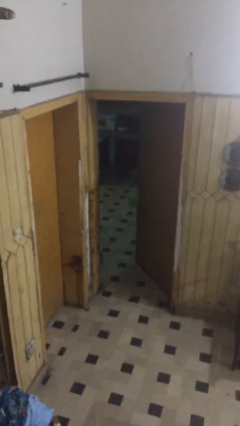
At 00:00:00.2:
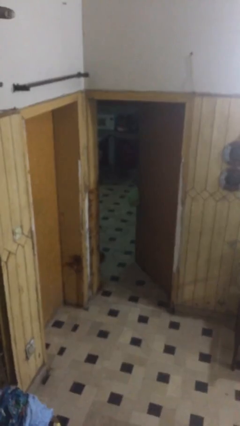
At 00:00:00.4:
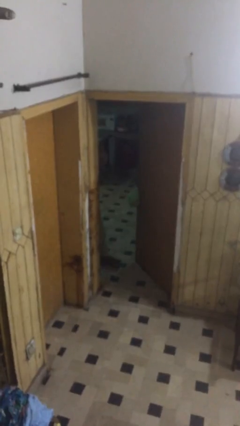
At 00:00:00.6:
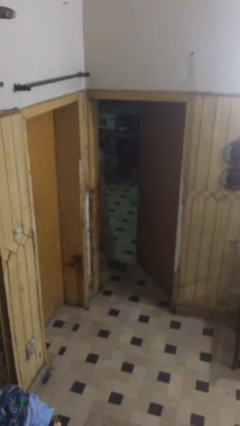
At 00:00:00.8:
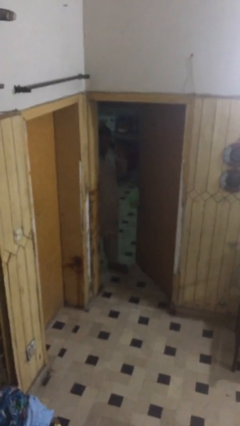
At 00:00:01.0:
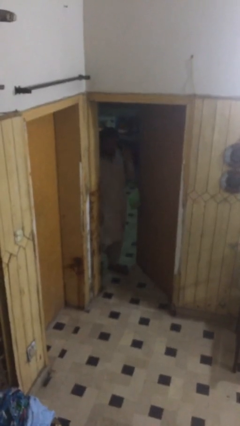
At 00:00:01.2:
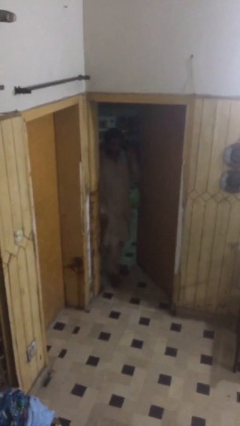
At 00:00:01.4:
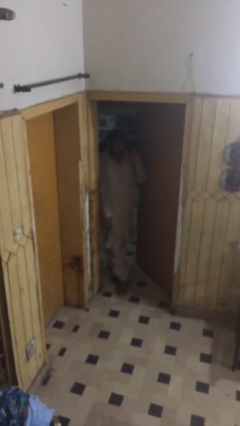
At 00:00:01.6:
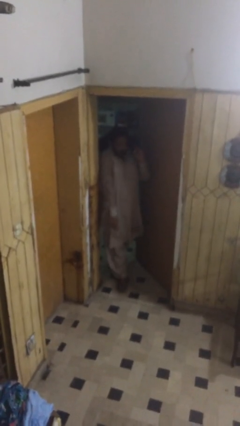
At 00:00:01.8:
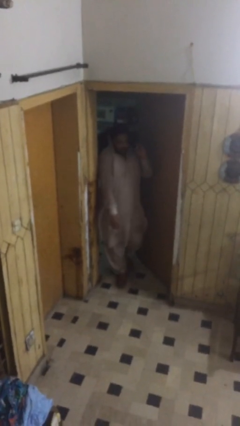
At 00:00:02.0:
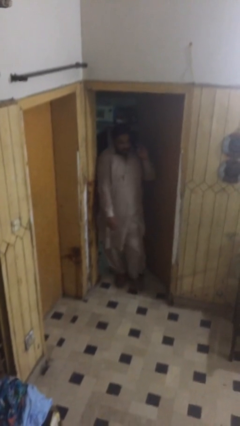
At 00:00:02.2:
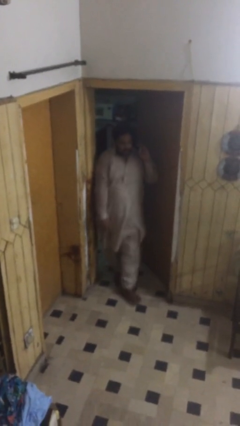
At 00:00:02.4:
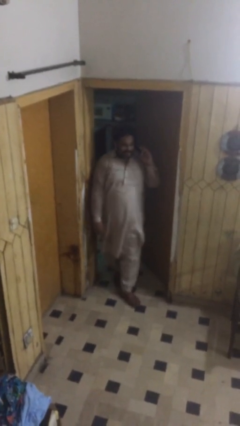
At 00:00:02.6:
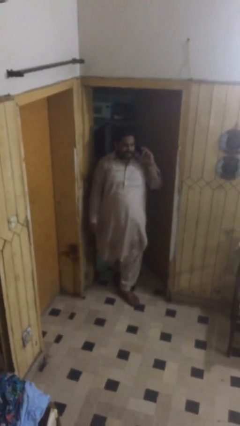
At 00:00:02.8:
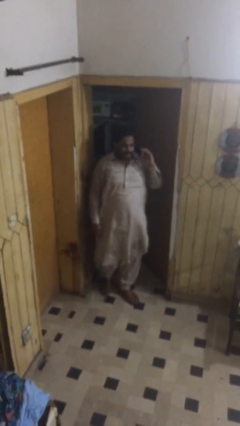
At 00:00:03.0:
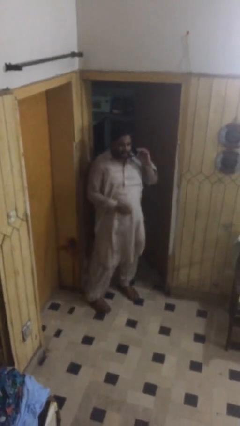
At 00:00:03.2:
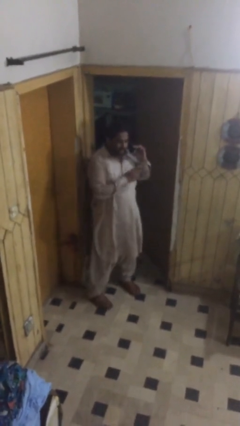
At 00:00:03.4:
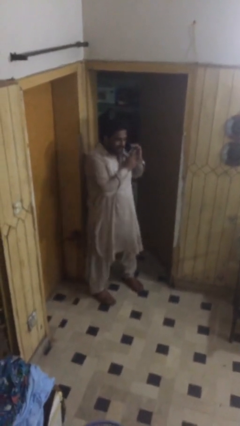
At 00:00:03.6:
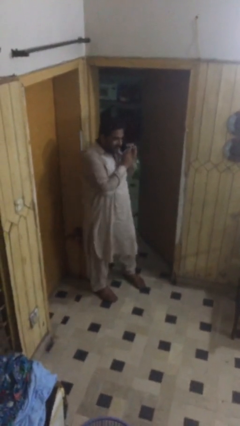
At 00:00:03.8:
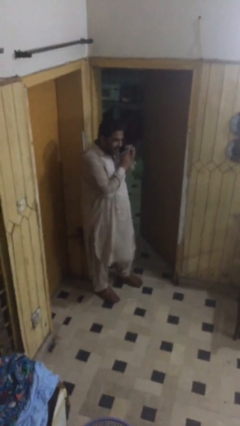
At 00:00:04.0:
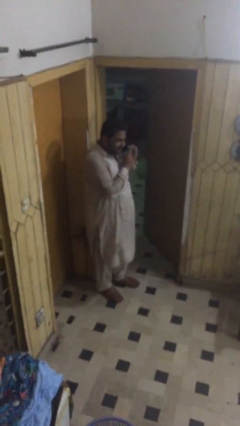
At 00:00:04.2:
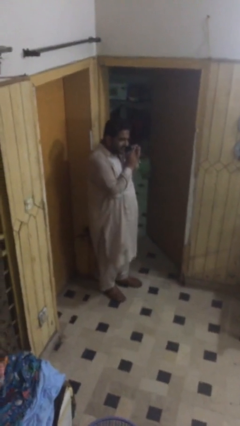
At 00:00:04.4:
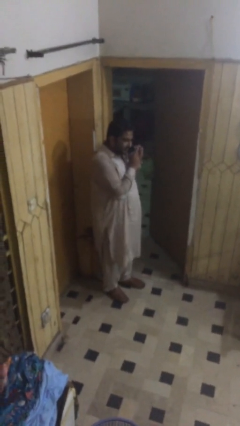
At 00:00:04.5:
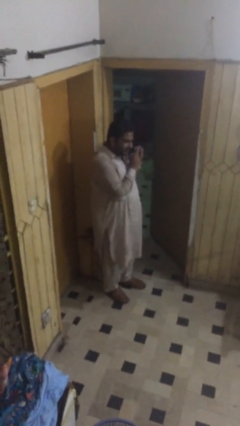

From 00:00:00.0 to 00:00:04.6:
person enters scene through structure

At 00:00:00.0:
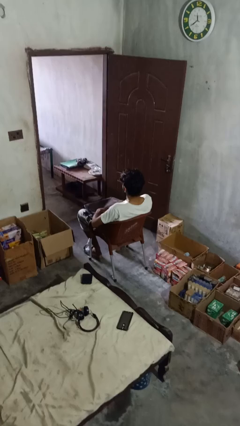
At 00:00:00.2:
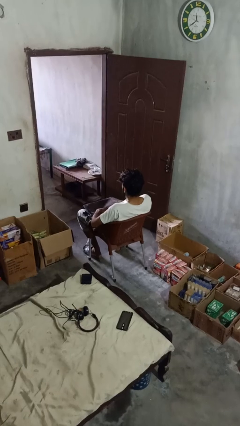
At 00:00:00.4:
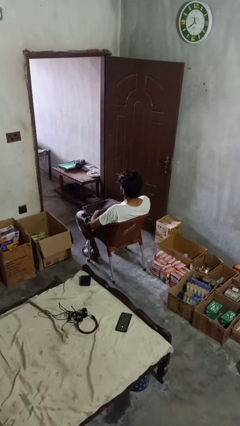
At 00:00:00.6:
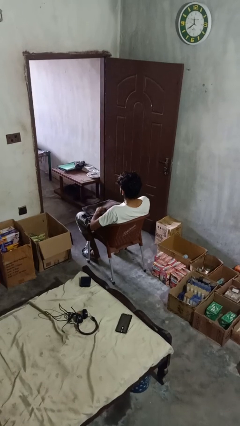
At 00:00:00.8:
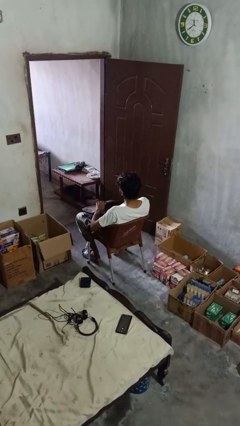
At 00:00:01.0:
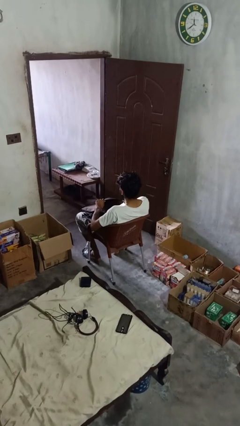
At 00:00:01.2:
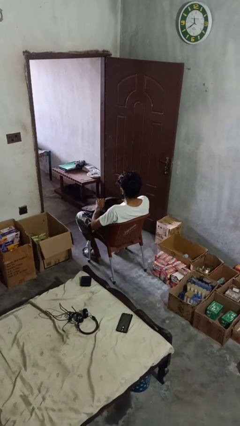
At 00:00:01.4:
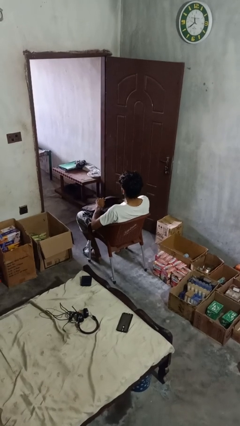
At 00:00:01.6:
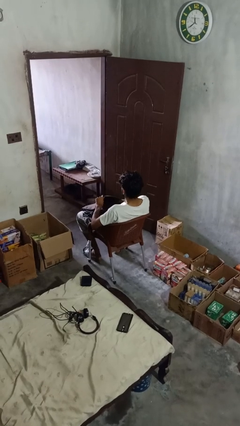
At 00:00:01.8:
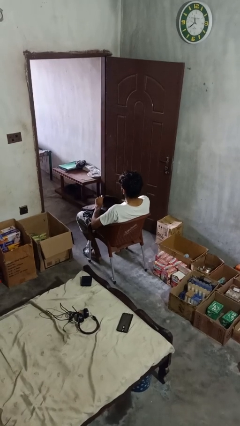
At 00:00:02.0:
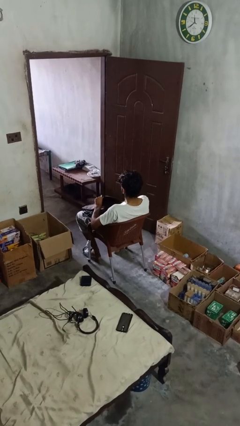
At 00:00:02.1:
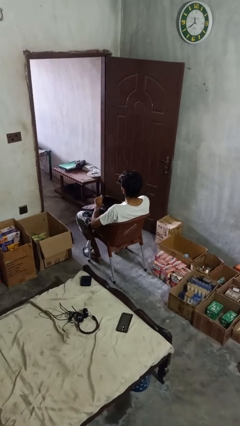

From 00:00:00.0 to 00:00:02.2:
person searches in backpack

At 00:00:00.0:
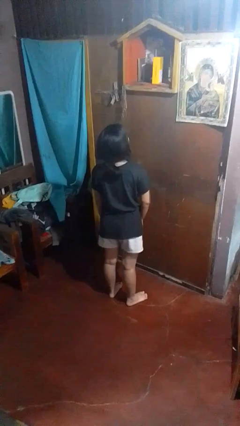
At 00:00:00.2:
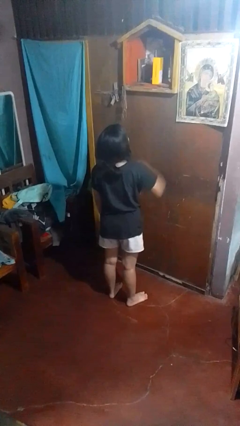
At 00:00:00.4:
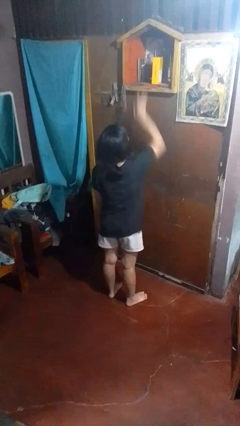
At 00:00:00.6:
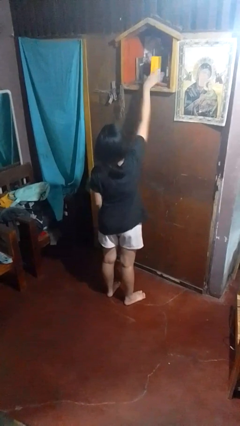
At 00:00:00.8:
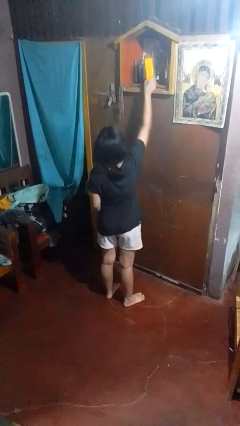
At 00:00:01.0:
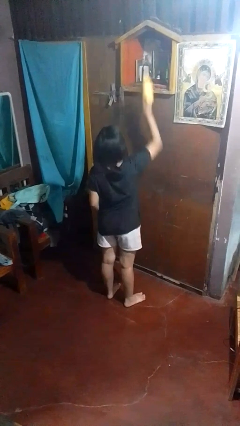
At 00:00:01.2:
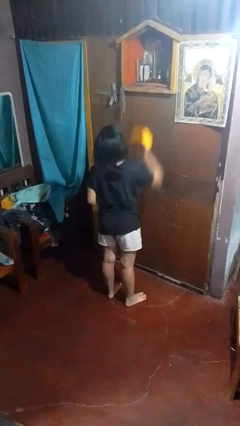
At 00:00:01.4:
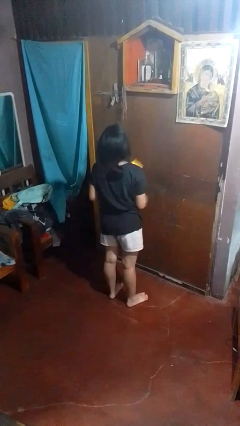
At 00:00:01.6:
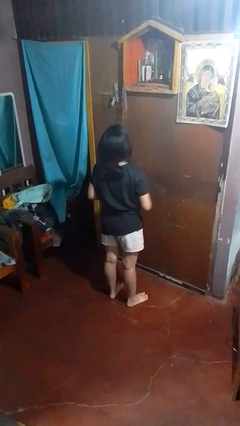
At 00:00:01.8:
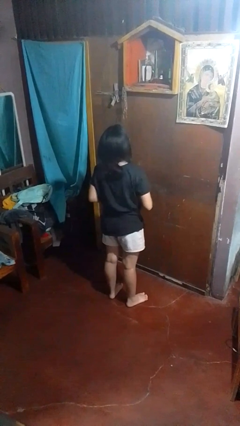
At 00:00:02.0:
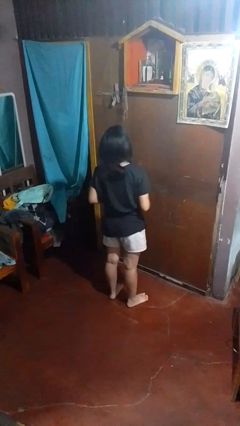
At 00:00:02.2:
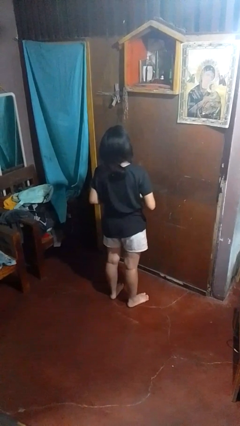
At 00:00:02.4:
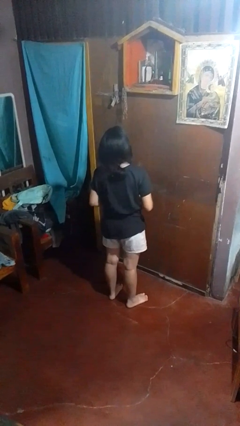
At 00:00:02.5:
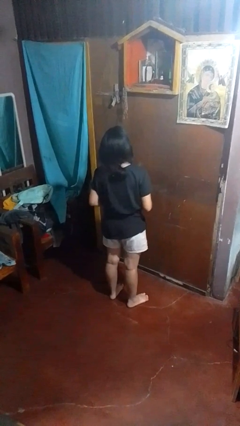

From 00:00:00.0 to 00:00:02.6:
person picks up object from shelf

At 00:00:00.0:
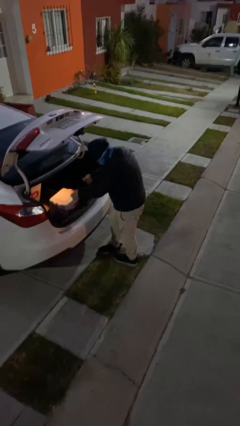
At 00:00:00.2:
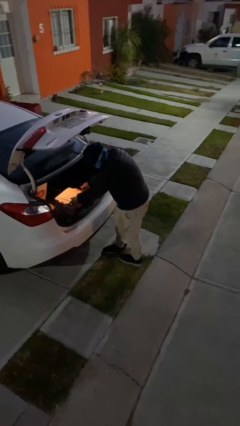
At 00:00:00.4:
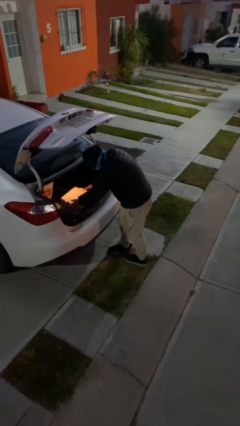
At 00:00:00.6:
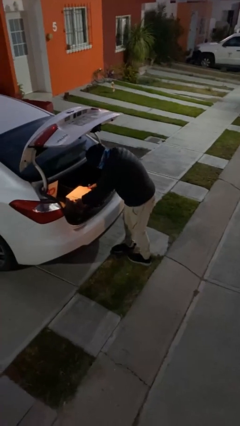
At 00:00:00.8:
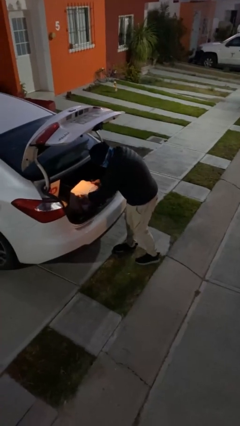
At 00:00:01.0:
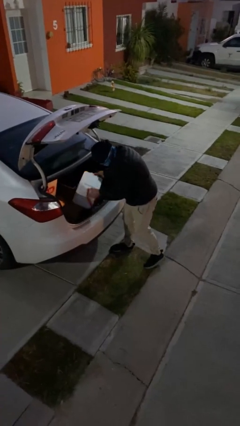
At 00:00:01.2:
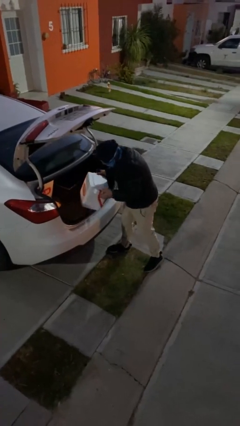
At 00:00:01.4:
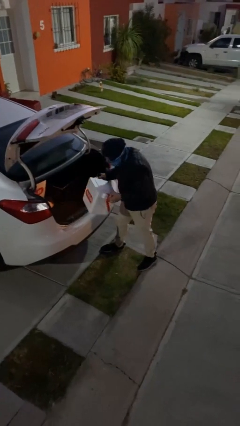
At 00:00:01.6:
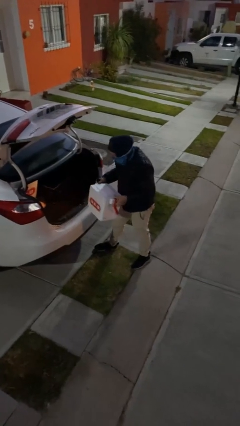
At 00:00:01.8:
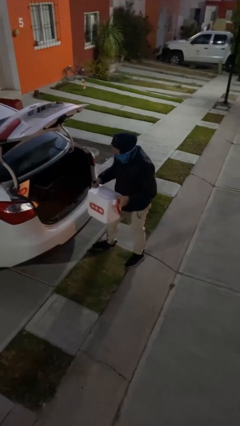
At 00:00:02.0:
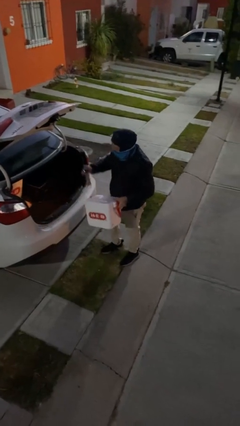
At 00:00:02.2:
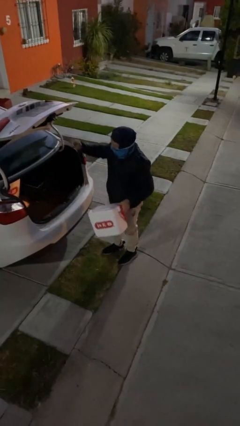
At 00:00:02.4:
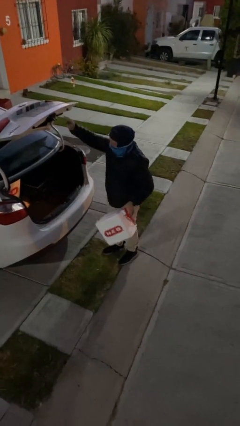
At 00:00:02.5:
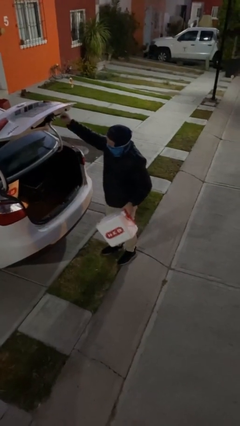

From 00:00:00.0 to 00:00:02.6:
person unloads car

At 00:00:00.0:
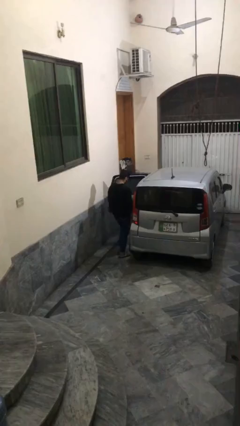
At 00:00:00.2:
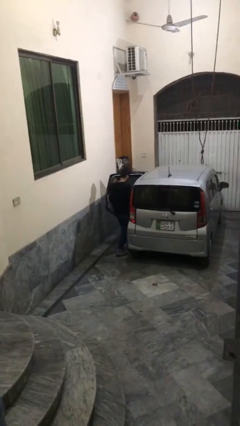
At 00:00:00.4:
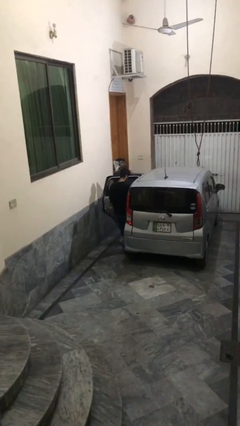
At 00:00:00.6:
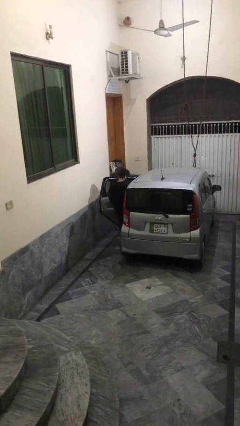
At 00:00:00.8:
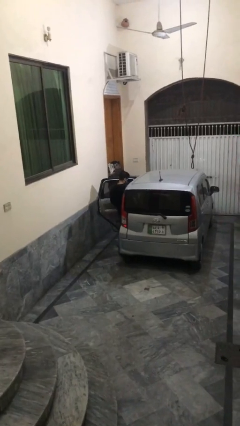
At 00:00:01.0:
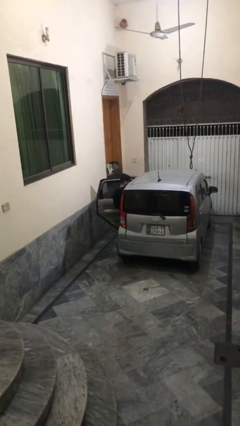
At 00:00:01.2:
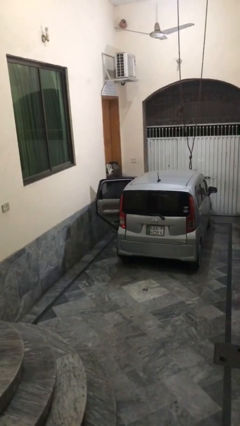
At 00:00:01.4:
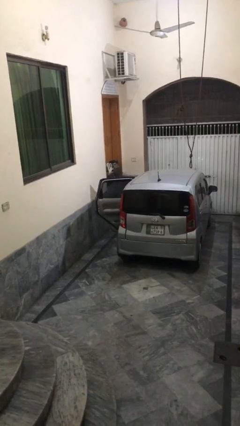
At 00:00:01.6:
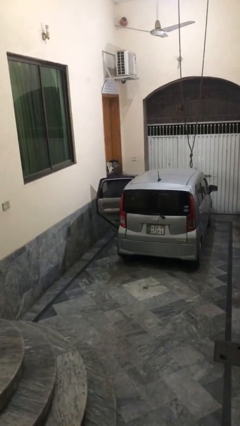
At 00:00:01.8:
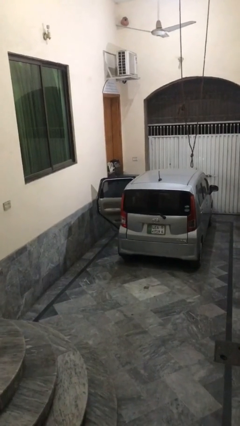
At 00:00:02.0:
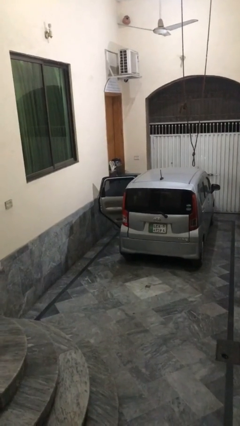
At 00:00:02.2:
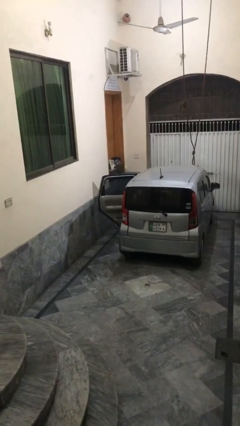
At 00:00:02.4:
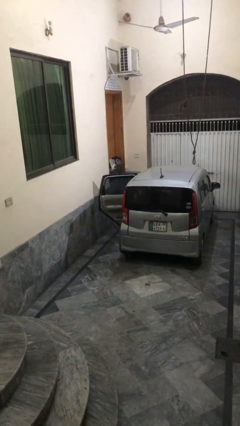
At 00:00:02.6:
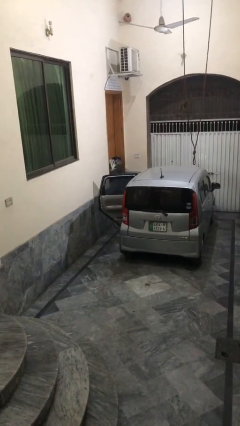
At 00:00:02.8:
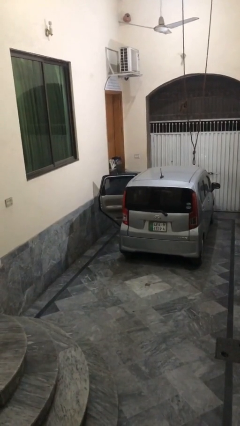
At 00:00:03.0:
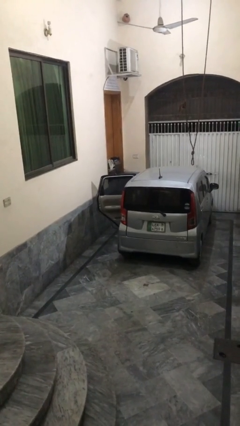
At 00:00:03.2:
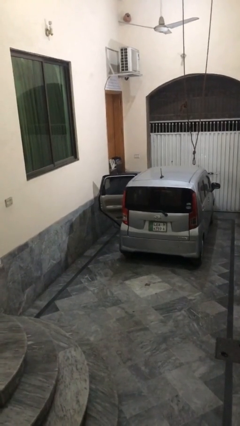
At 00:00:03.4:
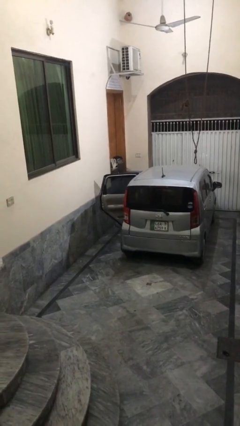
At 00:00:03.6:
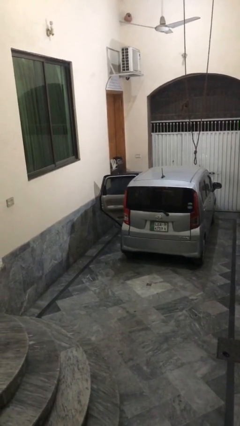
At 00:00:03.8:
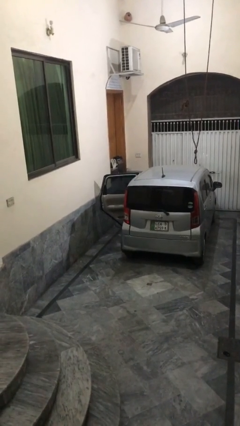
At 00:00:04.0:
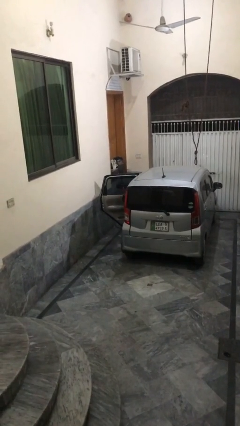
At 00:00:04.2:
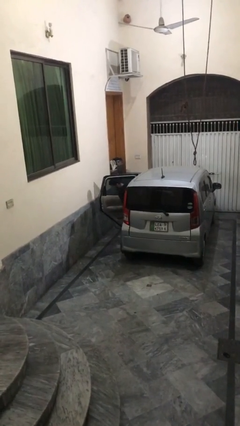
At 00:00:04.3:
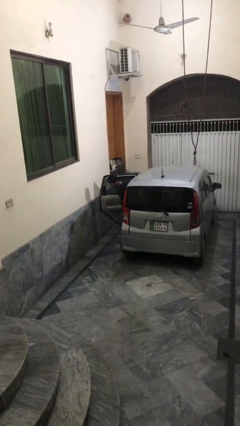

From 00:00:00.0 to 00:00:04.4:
person enters car

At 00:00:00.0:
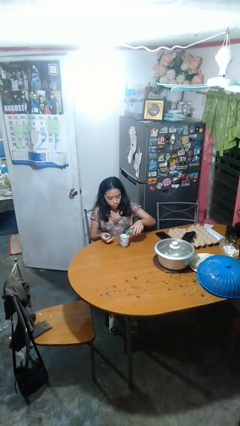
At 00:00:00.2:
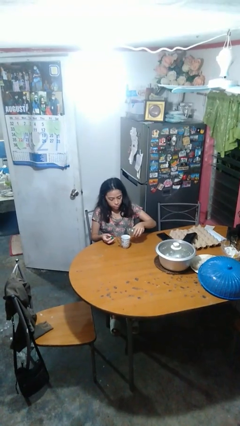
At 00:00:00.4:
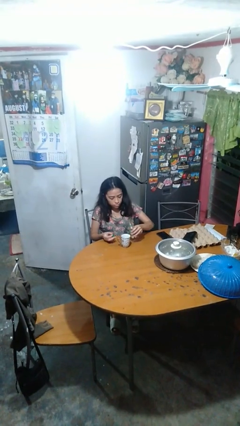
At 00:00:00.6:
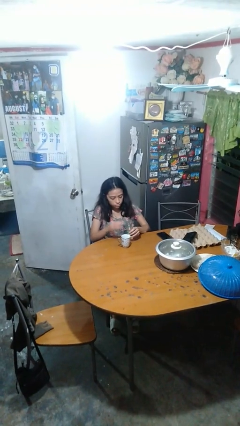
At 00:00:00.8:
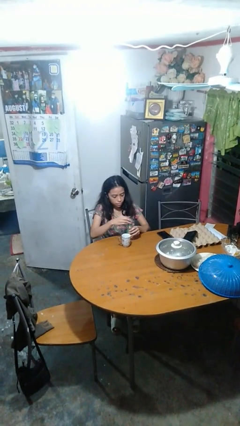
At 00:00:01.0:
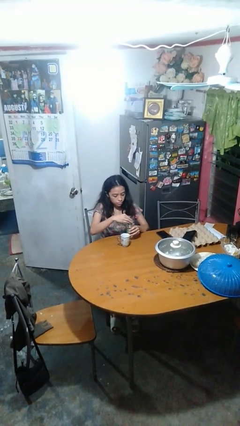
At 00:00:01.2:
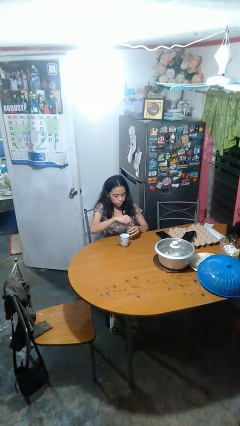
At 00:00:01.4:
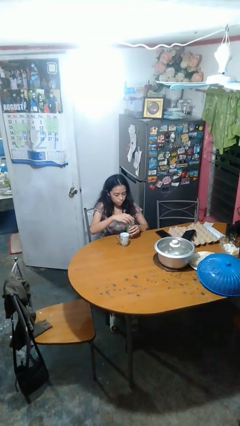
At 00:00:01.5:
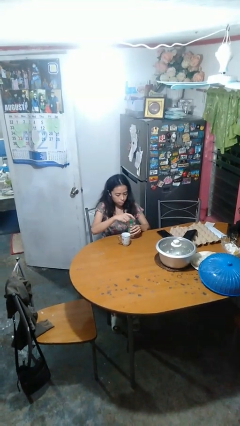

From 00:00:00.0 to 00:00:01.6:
person screws lid to bottle
